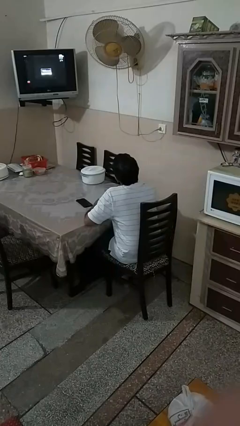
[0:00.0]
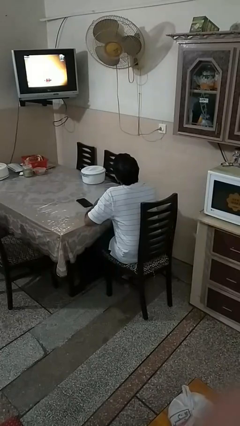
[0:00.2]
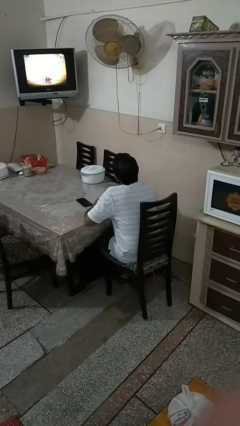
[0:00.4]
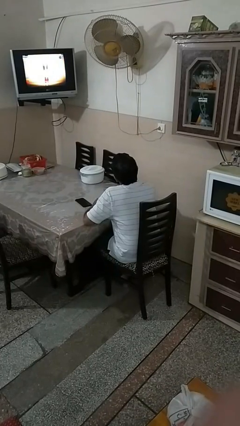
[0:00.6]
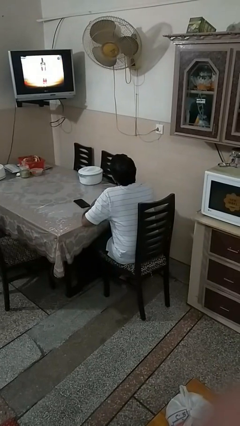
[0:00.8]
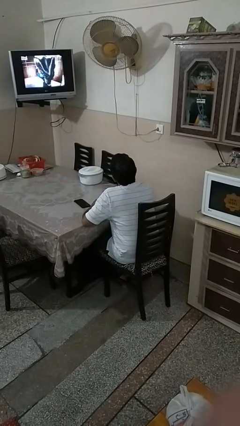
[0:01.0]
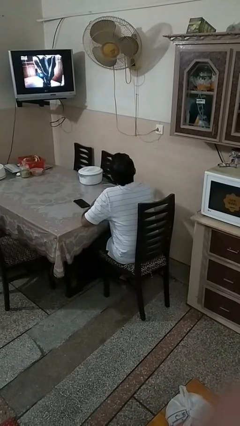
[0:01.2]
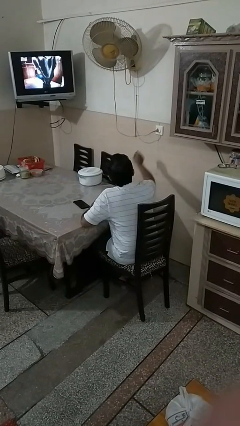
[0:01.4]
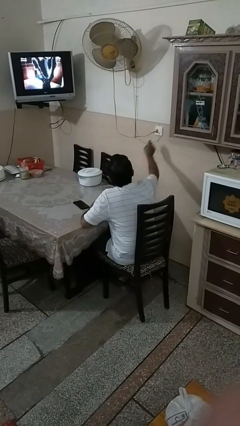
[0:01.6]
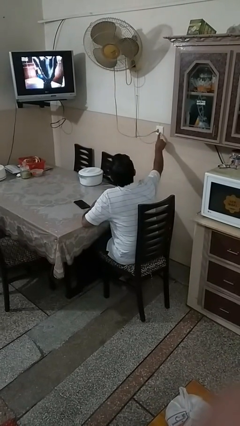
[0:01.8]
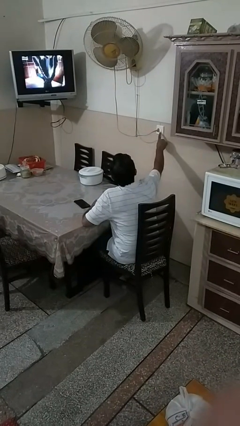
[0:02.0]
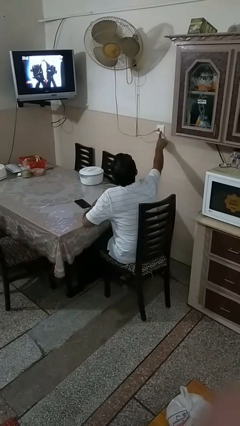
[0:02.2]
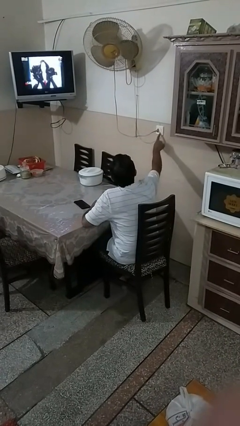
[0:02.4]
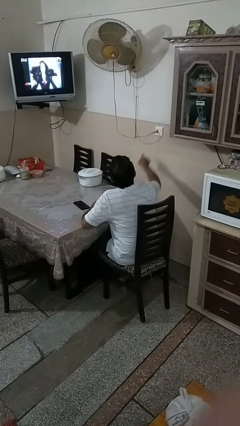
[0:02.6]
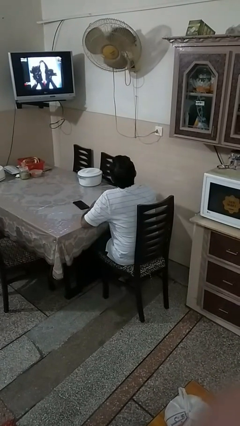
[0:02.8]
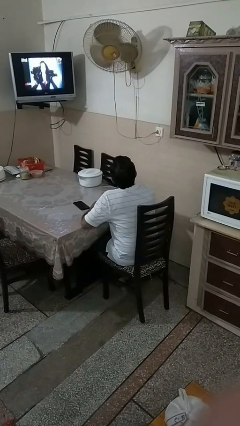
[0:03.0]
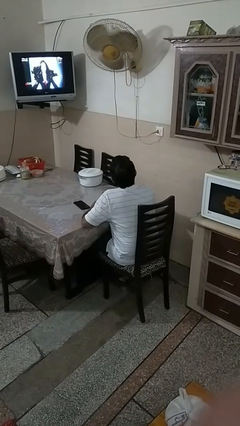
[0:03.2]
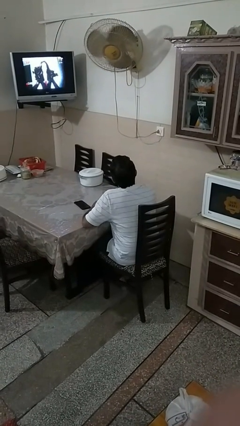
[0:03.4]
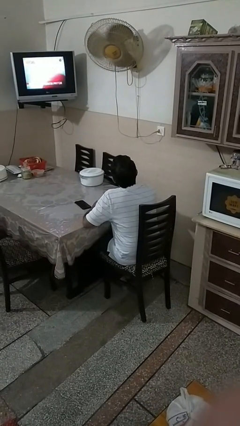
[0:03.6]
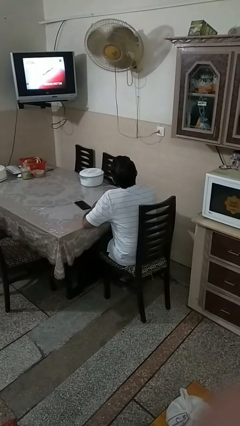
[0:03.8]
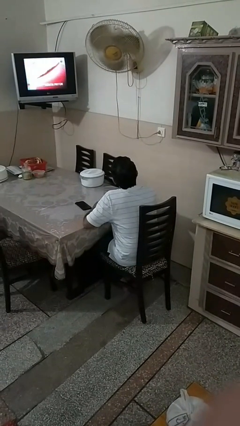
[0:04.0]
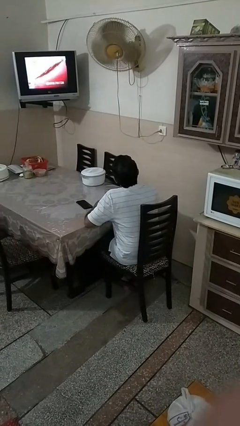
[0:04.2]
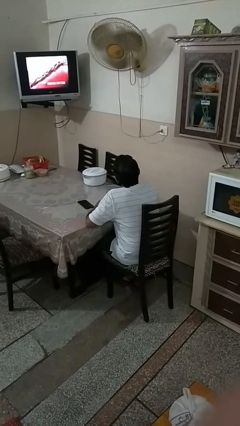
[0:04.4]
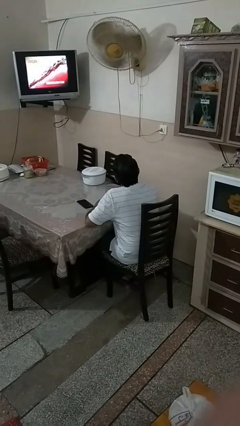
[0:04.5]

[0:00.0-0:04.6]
person turns on fan

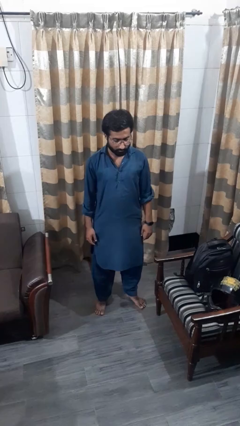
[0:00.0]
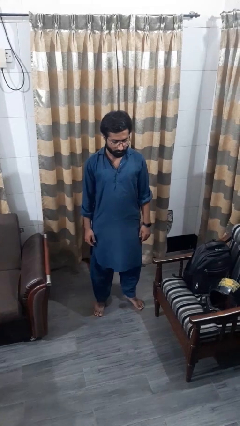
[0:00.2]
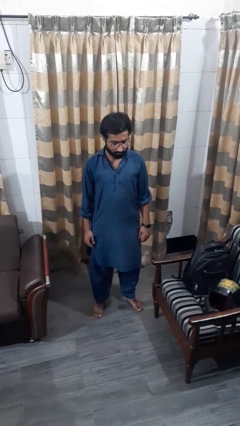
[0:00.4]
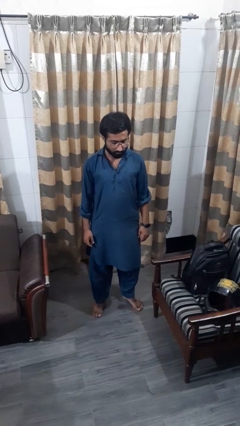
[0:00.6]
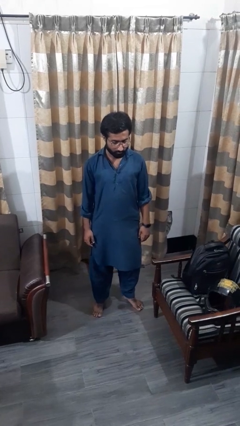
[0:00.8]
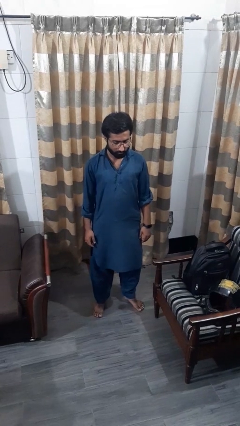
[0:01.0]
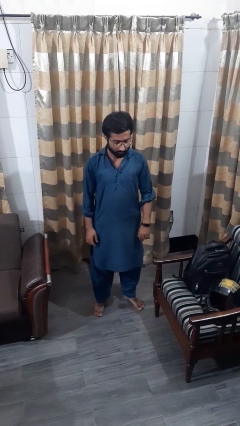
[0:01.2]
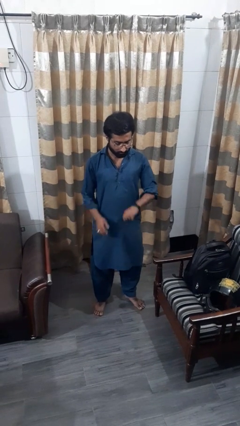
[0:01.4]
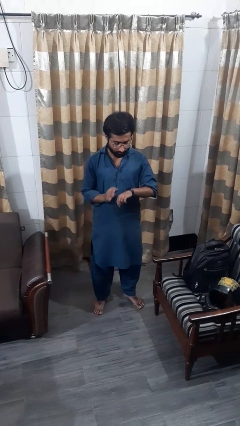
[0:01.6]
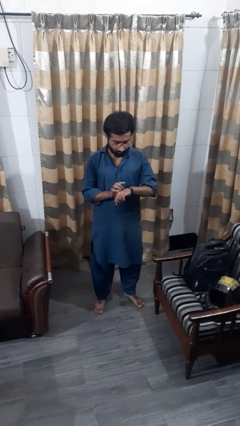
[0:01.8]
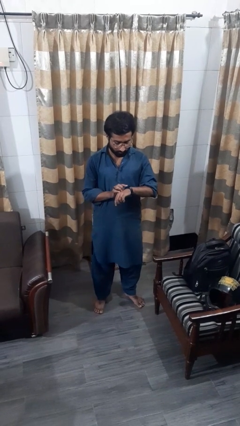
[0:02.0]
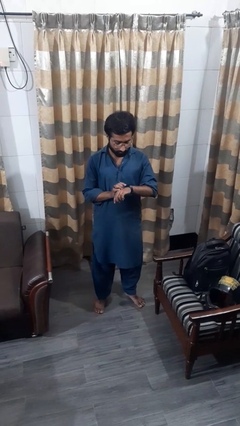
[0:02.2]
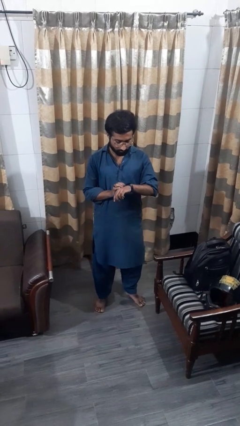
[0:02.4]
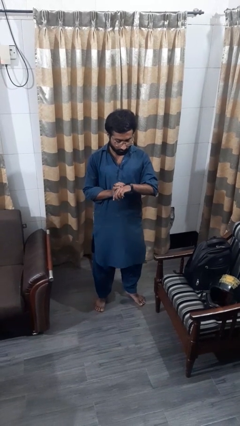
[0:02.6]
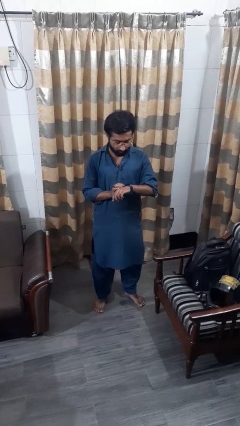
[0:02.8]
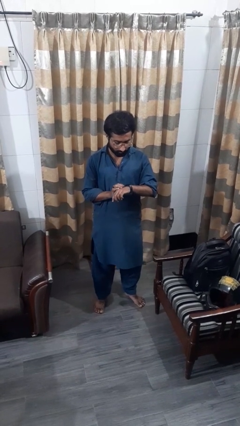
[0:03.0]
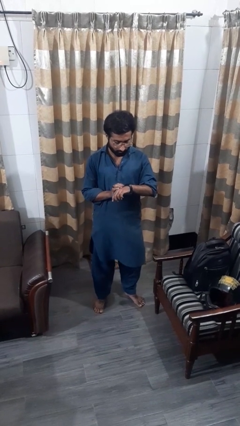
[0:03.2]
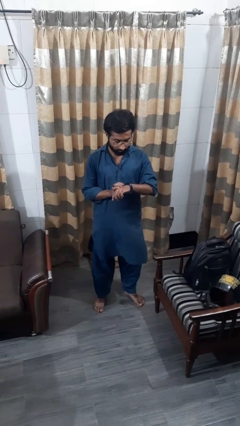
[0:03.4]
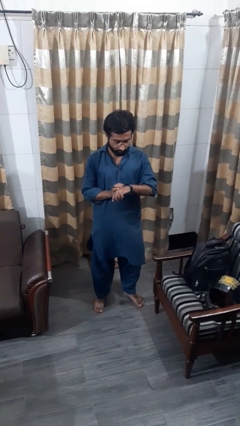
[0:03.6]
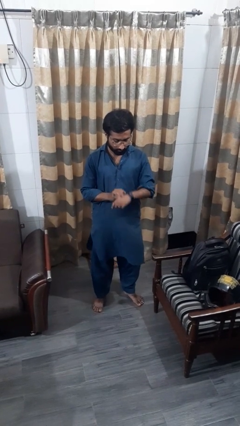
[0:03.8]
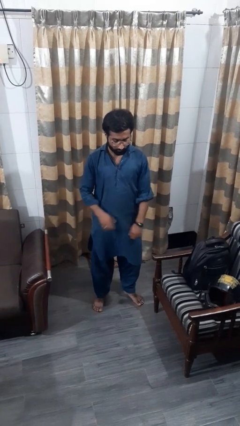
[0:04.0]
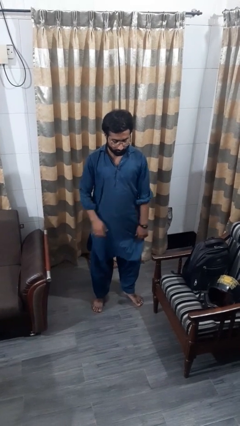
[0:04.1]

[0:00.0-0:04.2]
person looks at wristwatch

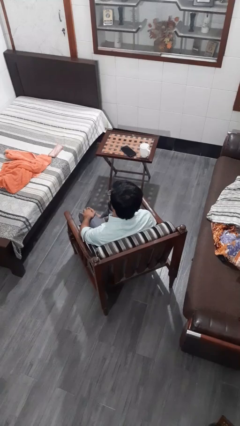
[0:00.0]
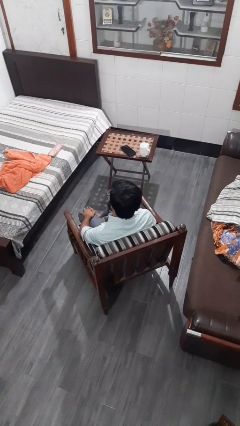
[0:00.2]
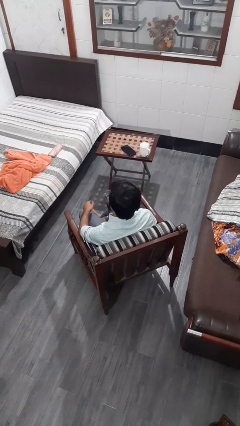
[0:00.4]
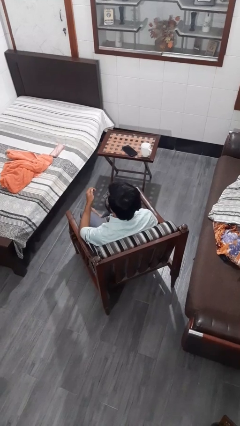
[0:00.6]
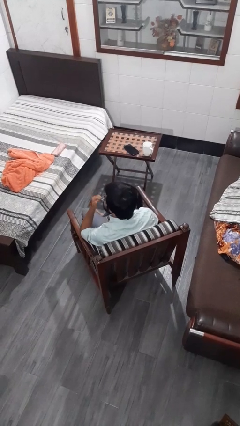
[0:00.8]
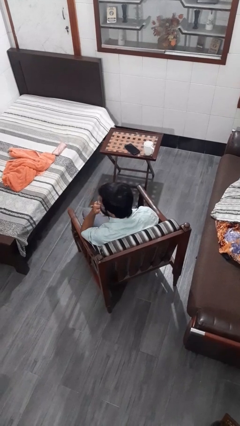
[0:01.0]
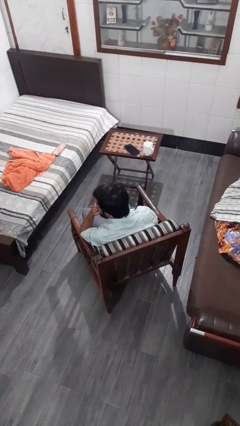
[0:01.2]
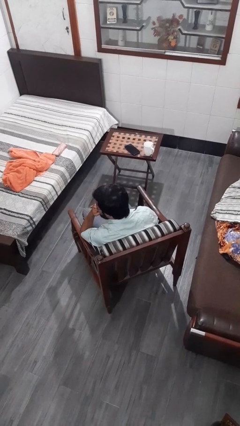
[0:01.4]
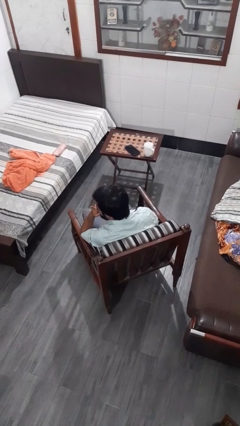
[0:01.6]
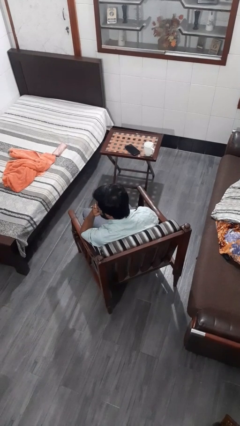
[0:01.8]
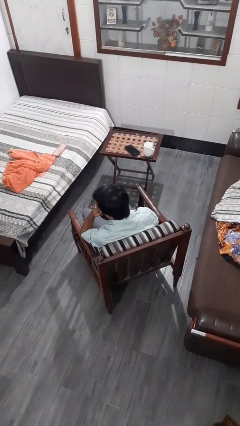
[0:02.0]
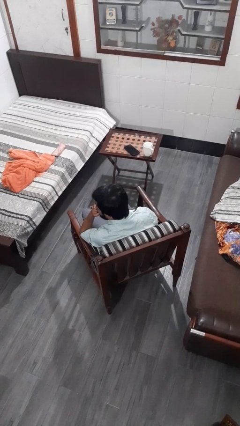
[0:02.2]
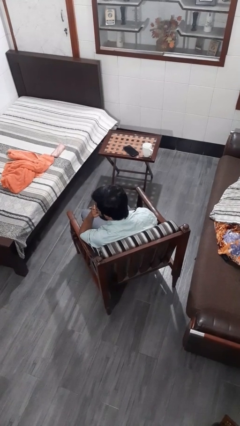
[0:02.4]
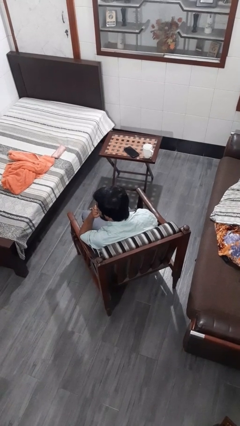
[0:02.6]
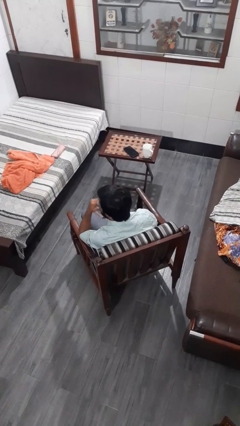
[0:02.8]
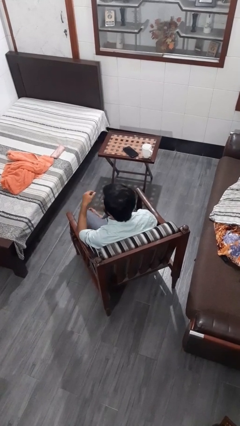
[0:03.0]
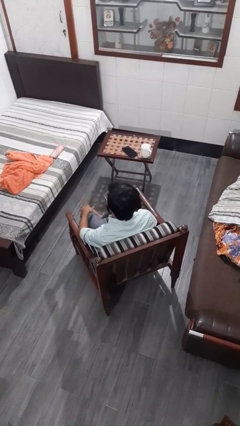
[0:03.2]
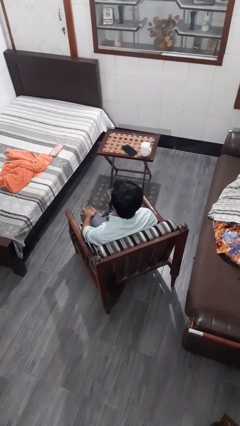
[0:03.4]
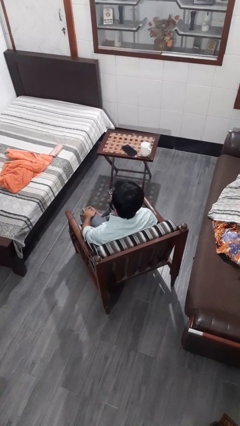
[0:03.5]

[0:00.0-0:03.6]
person strokes chin

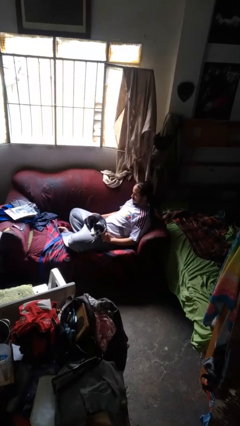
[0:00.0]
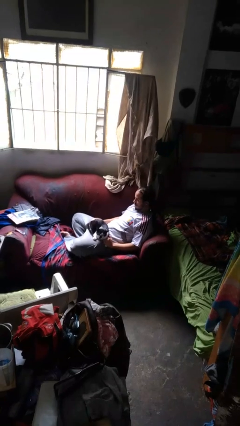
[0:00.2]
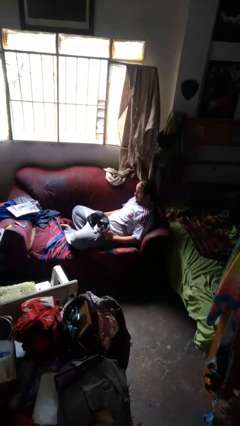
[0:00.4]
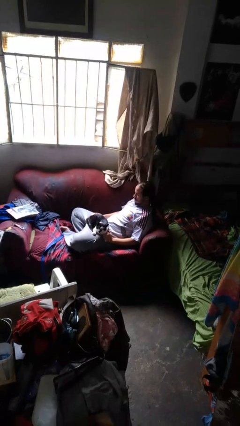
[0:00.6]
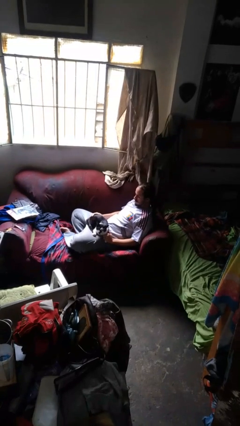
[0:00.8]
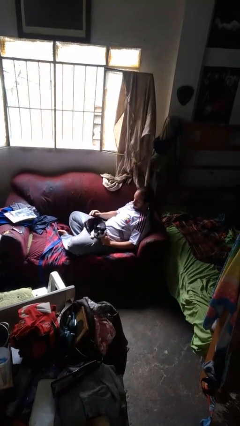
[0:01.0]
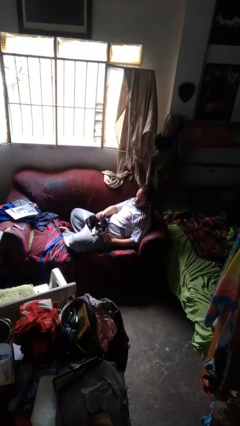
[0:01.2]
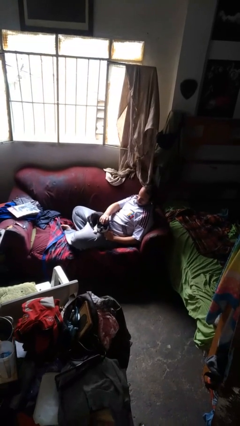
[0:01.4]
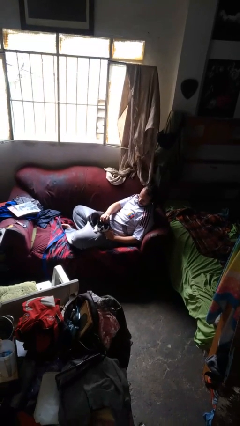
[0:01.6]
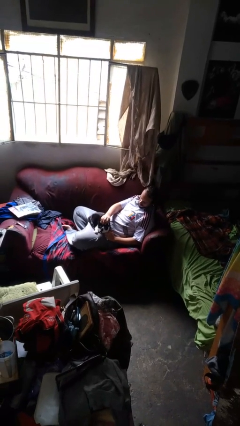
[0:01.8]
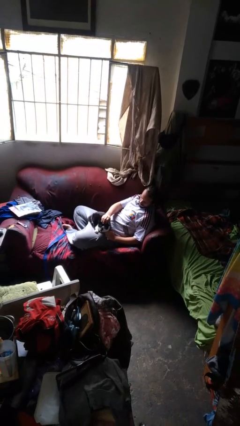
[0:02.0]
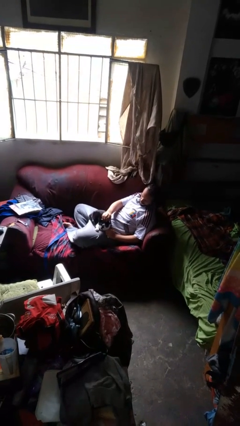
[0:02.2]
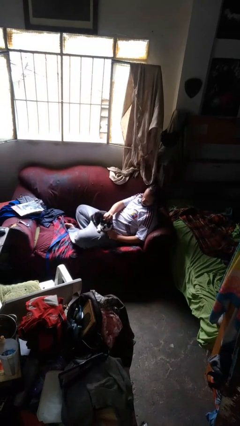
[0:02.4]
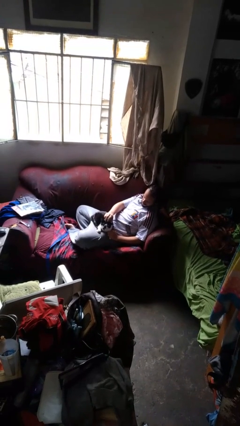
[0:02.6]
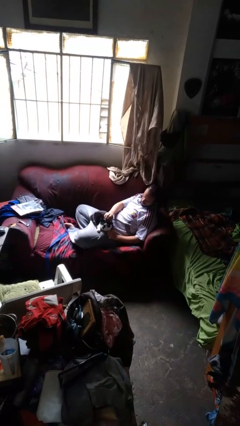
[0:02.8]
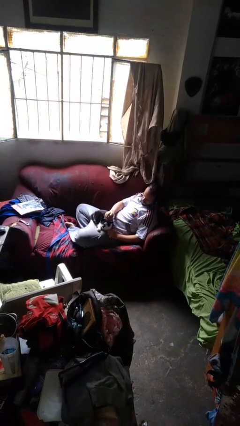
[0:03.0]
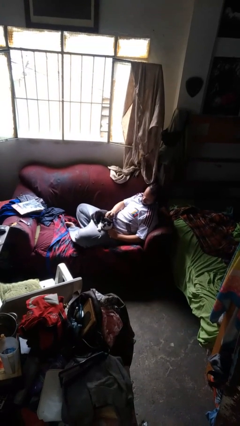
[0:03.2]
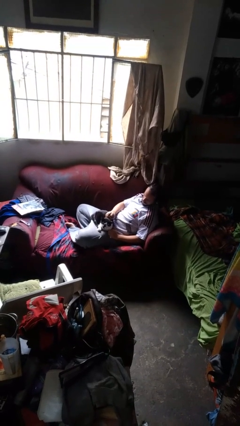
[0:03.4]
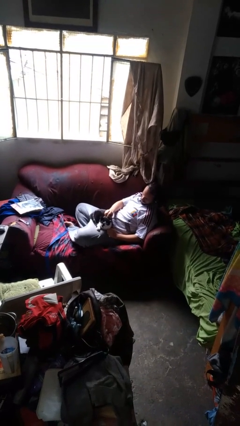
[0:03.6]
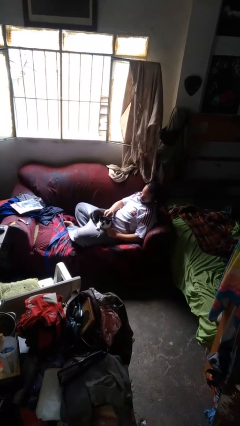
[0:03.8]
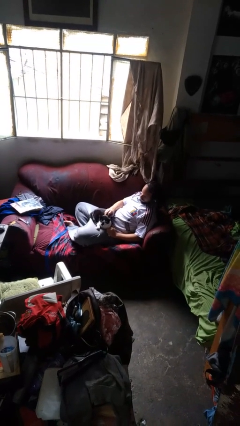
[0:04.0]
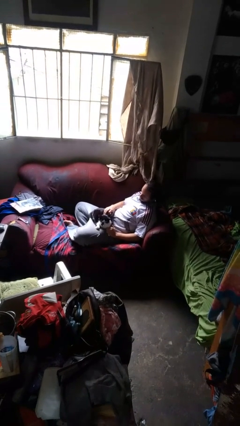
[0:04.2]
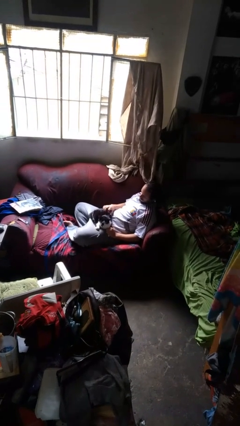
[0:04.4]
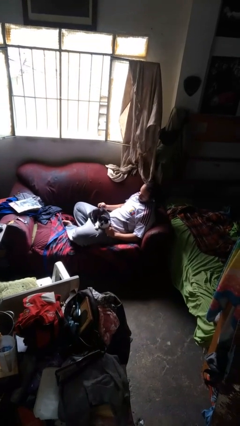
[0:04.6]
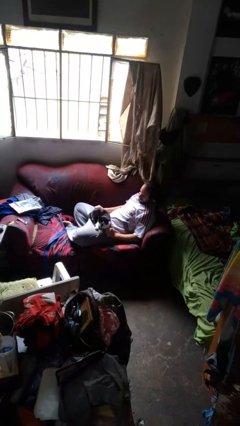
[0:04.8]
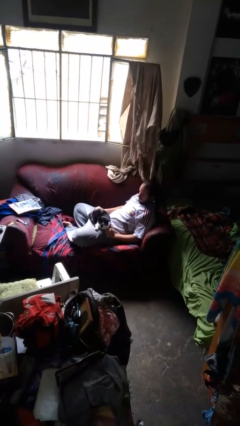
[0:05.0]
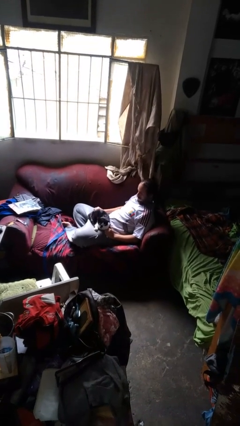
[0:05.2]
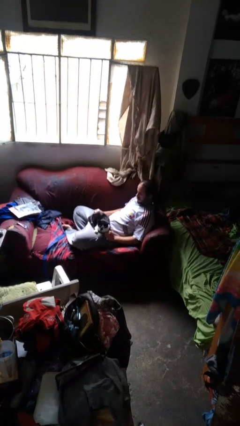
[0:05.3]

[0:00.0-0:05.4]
person pets cat

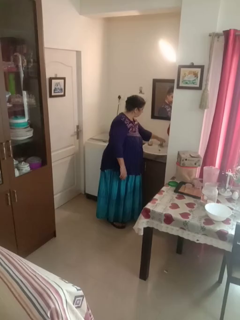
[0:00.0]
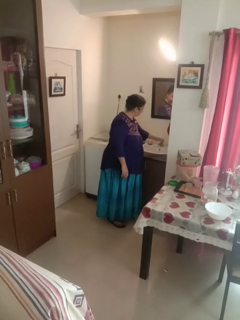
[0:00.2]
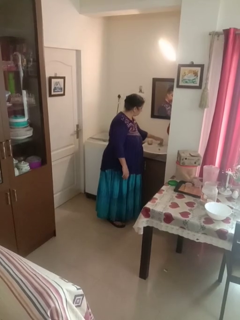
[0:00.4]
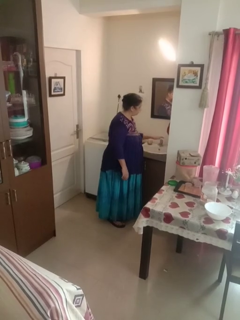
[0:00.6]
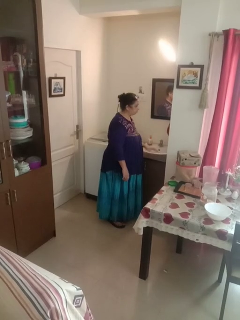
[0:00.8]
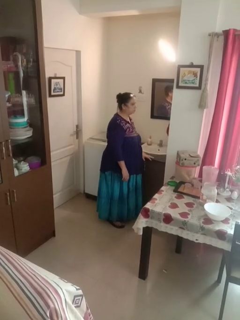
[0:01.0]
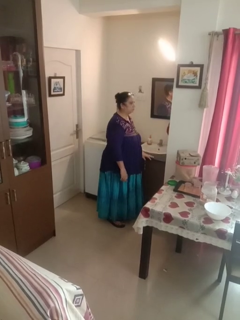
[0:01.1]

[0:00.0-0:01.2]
person turns off faucet
